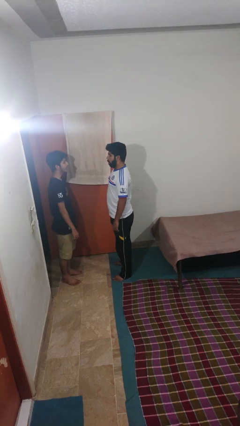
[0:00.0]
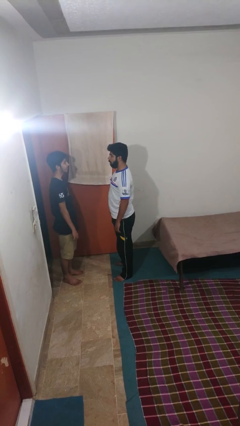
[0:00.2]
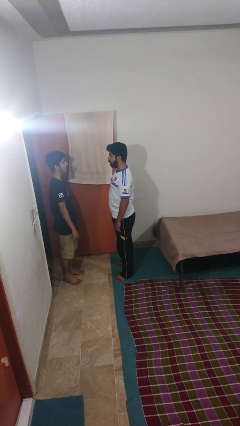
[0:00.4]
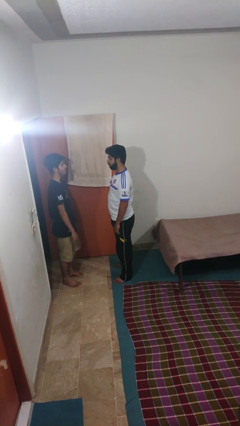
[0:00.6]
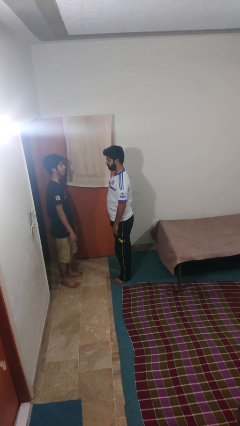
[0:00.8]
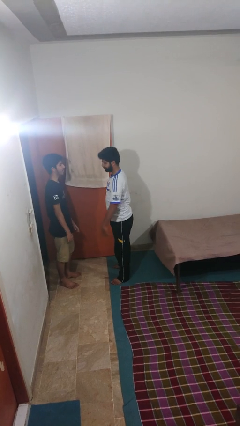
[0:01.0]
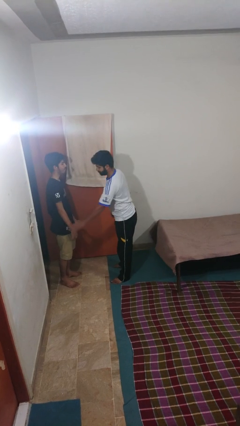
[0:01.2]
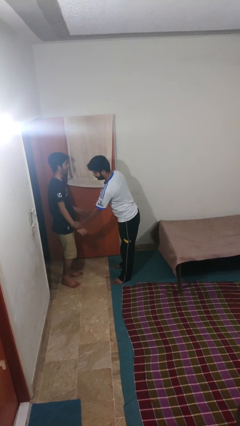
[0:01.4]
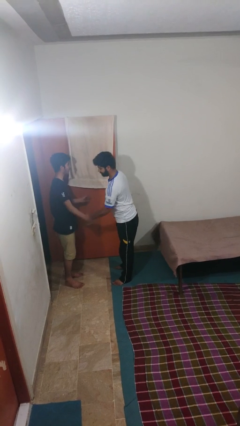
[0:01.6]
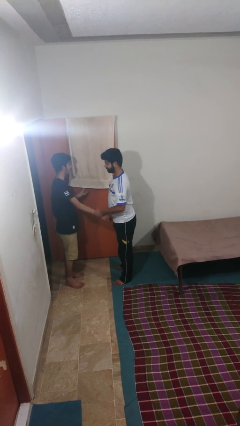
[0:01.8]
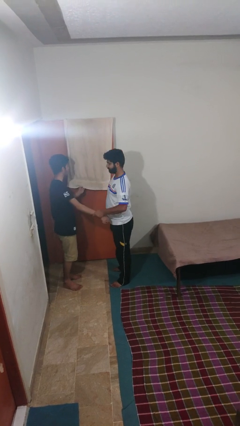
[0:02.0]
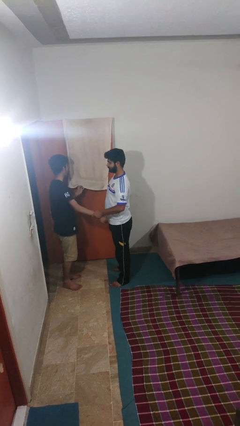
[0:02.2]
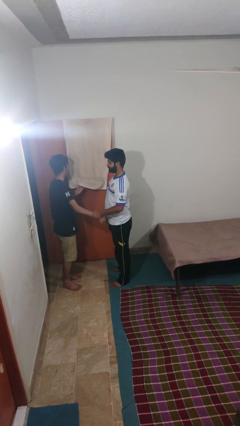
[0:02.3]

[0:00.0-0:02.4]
person grabs person by forearm

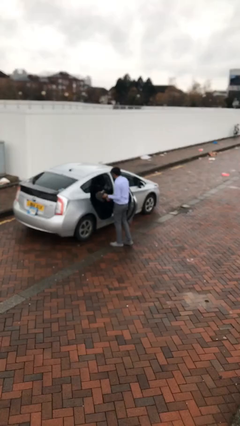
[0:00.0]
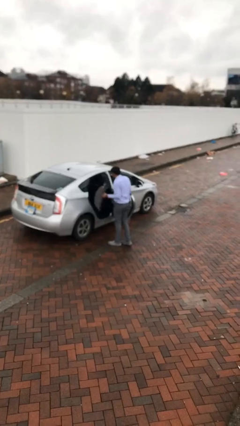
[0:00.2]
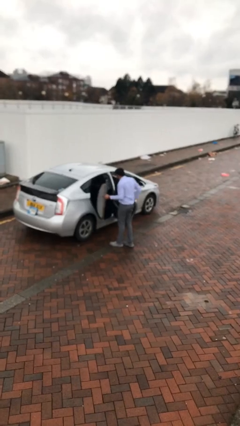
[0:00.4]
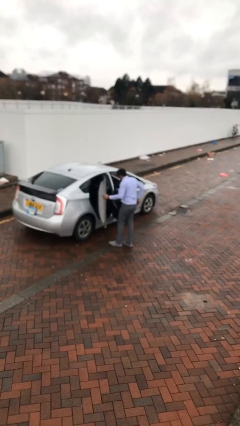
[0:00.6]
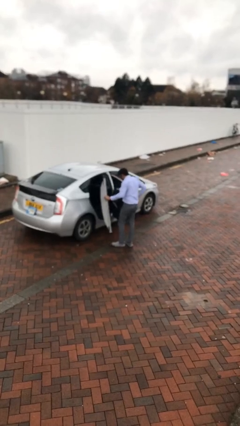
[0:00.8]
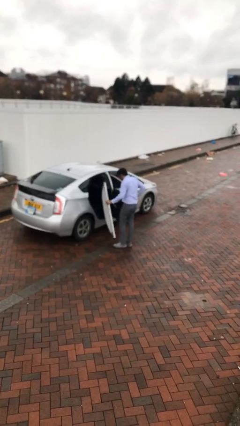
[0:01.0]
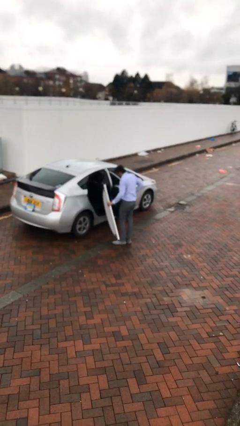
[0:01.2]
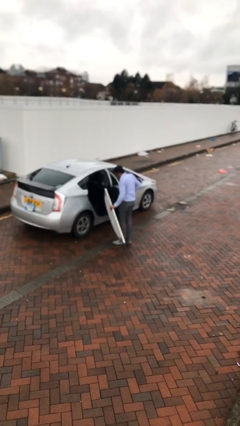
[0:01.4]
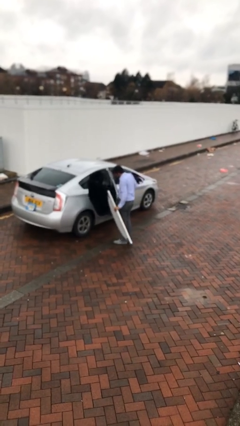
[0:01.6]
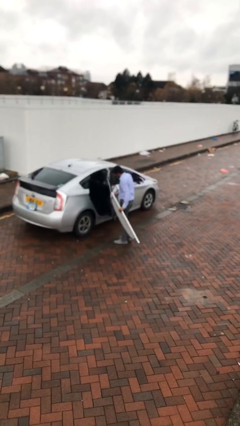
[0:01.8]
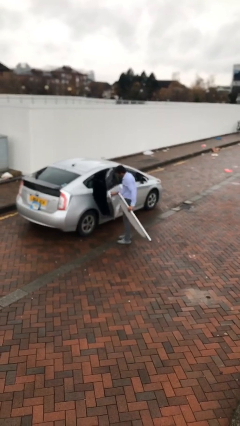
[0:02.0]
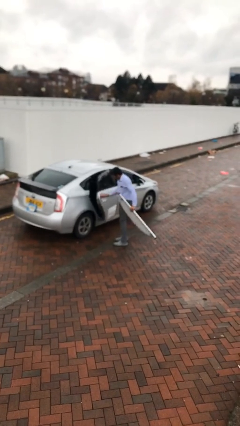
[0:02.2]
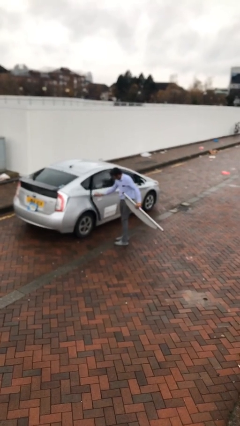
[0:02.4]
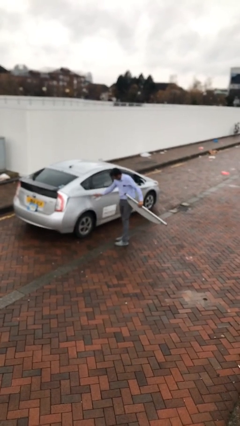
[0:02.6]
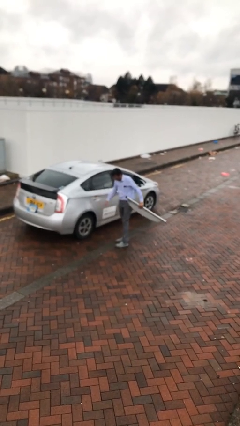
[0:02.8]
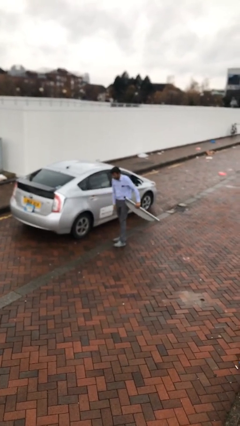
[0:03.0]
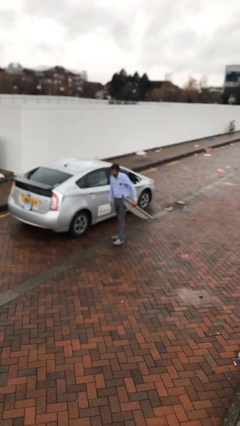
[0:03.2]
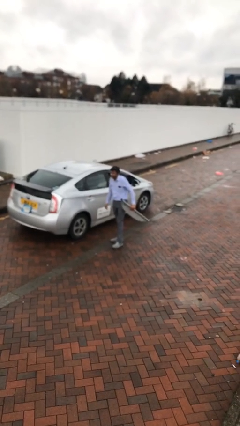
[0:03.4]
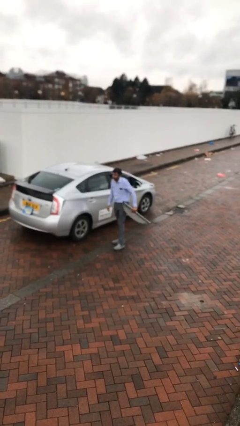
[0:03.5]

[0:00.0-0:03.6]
person closes car door

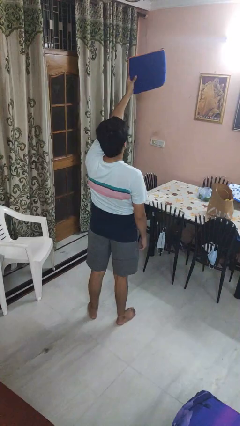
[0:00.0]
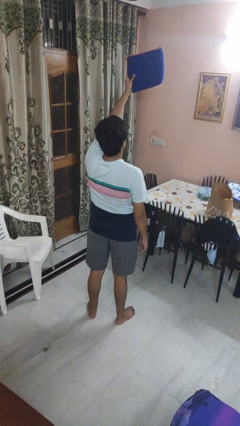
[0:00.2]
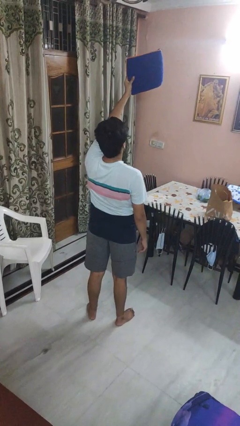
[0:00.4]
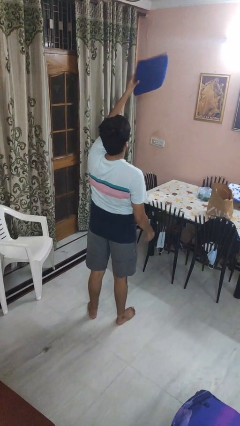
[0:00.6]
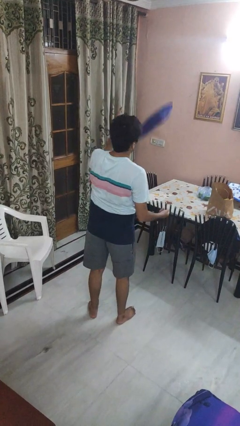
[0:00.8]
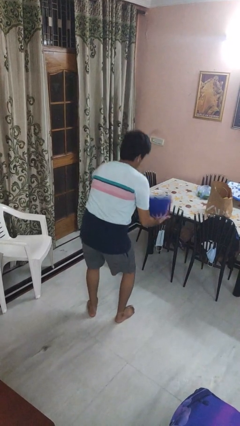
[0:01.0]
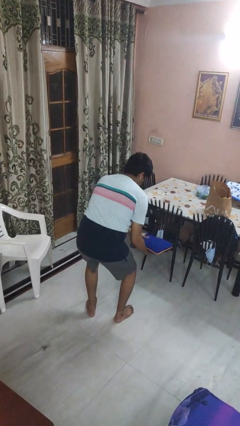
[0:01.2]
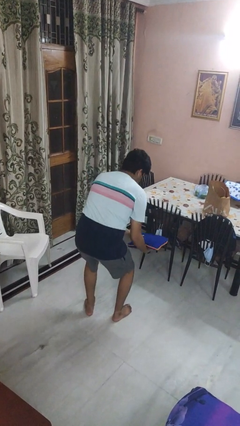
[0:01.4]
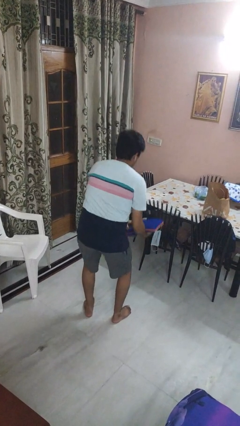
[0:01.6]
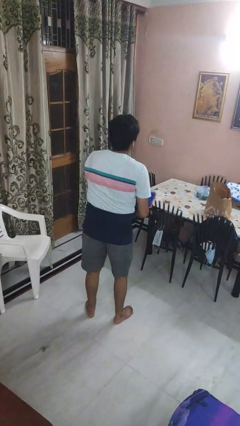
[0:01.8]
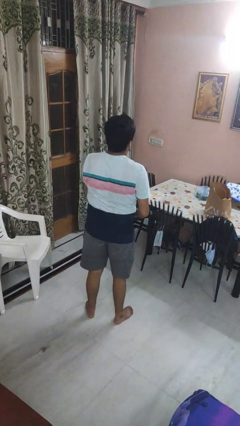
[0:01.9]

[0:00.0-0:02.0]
person catches dropped object

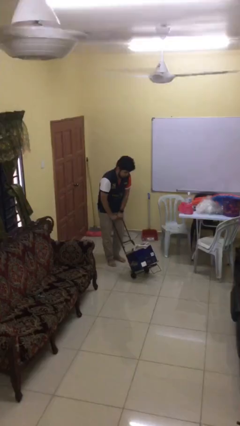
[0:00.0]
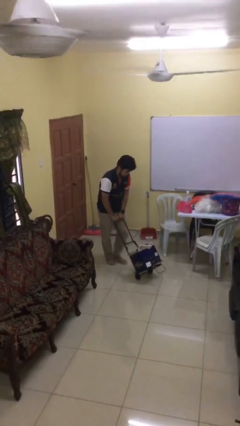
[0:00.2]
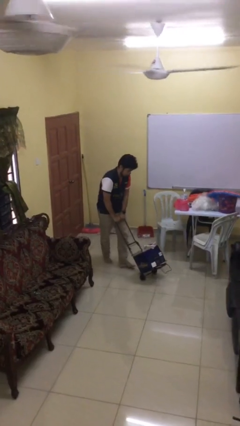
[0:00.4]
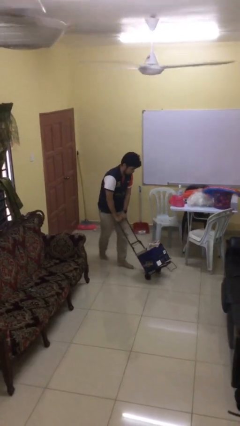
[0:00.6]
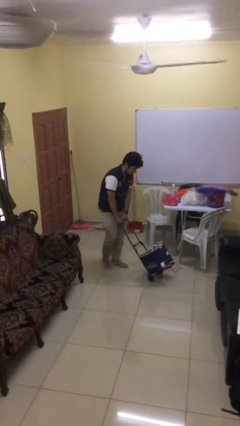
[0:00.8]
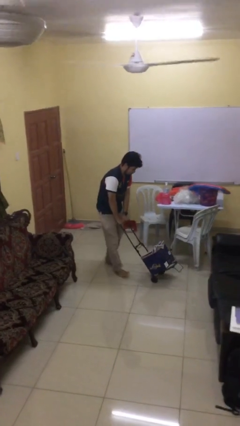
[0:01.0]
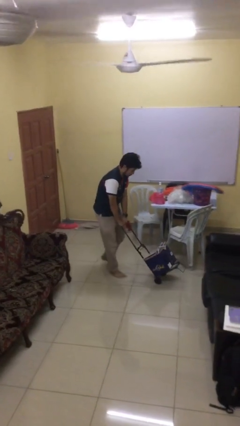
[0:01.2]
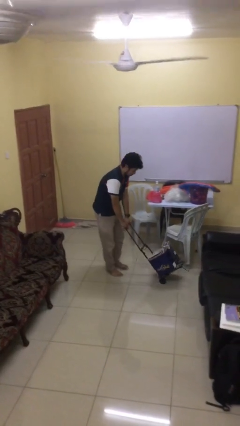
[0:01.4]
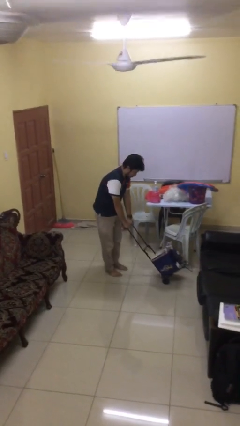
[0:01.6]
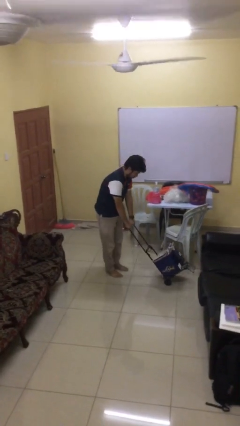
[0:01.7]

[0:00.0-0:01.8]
person pushes wheeled cart

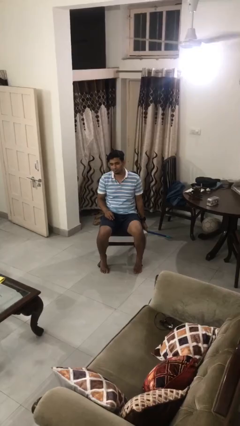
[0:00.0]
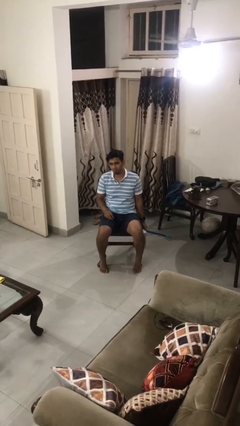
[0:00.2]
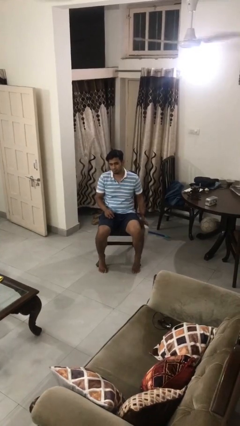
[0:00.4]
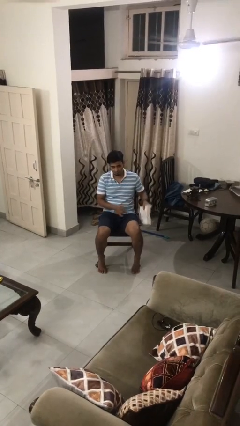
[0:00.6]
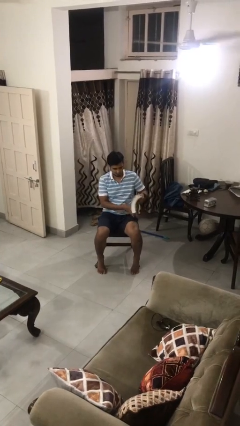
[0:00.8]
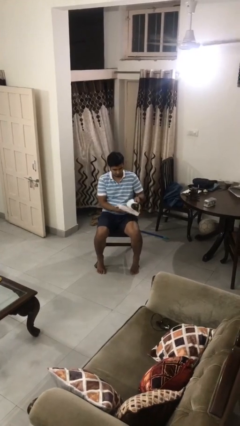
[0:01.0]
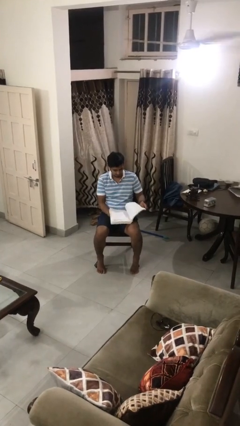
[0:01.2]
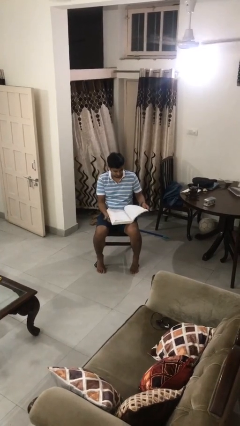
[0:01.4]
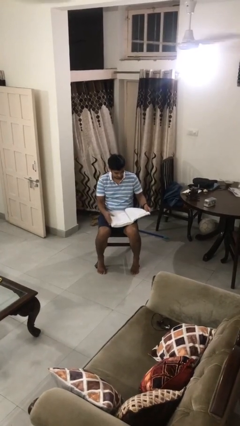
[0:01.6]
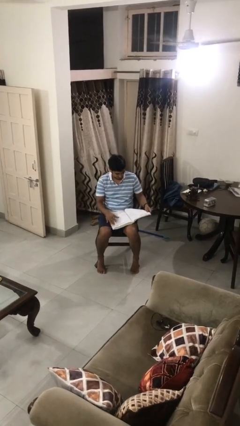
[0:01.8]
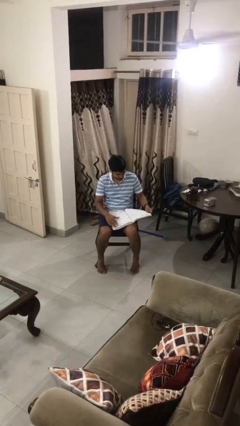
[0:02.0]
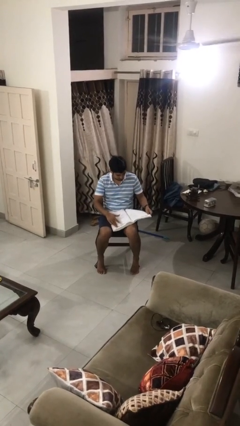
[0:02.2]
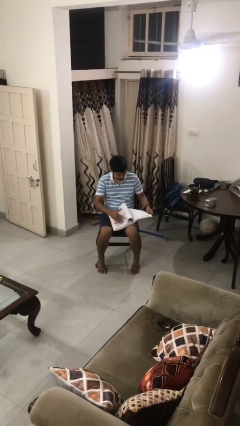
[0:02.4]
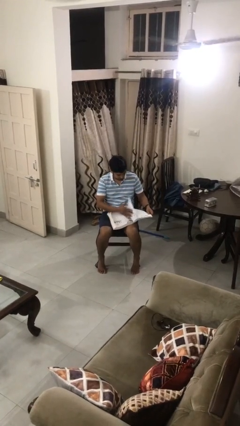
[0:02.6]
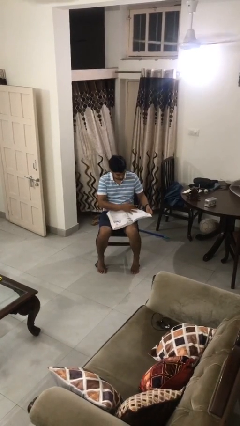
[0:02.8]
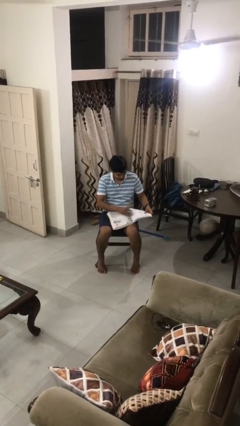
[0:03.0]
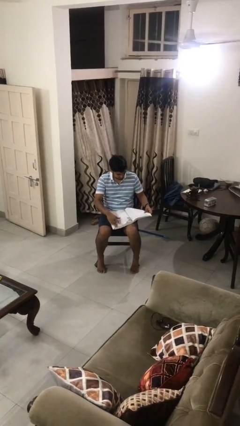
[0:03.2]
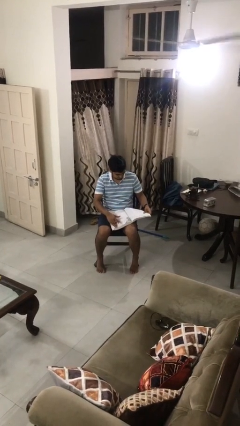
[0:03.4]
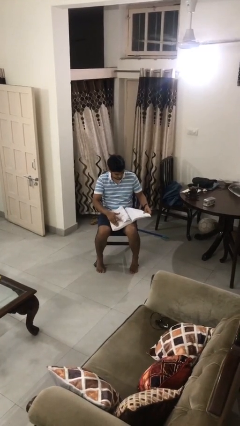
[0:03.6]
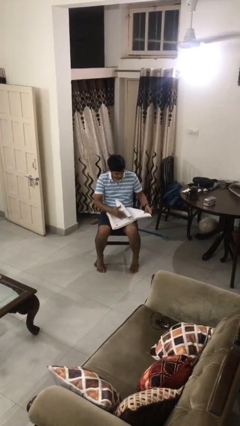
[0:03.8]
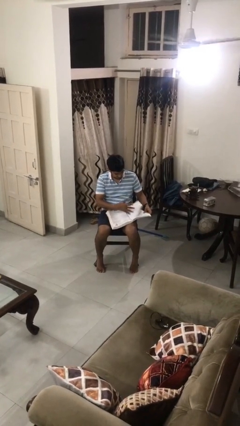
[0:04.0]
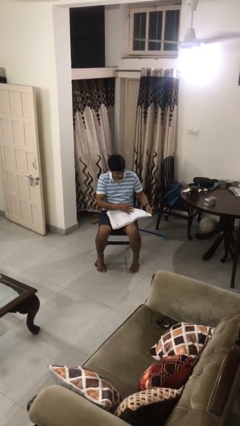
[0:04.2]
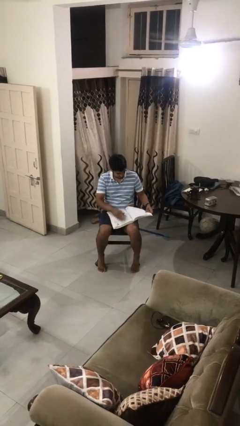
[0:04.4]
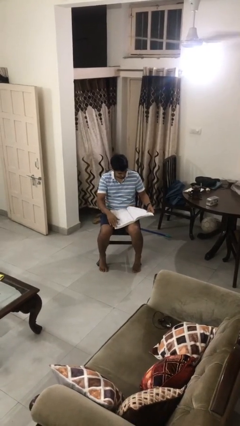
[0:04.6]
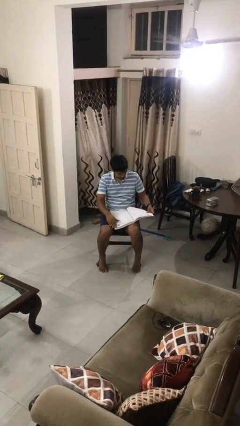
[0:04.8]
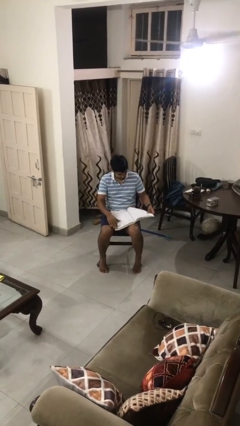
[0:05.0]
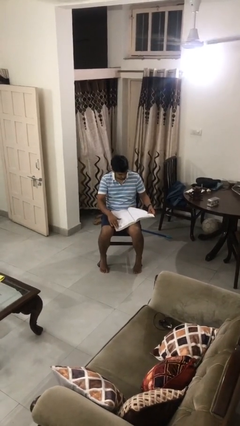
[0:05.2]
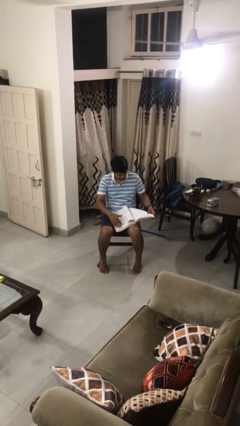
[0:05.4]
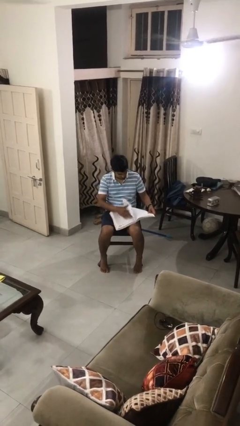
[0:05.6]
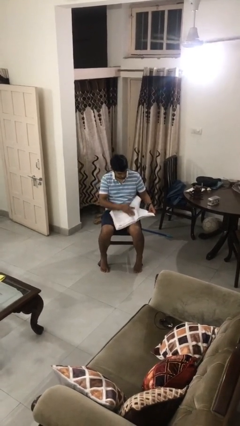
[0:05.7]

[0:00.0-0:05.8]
person reads book

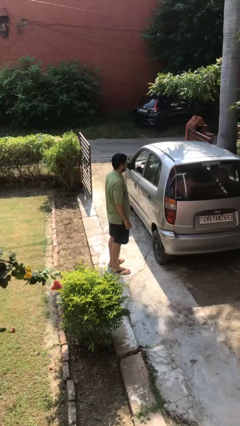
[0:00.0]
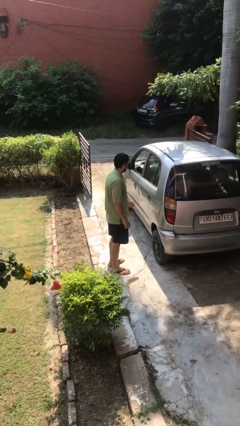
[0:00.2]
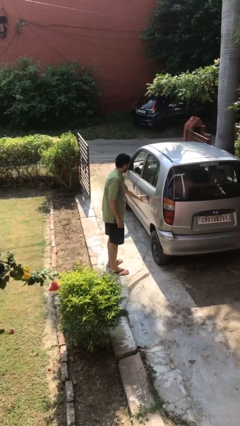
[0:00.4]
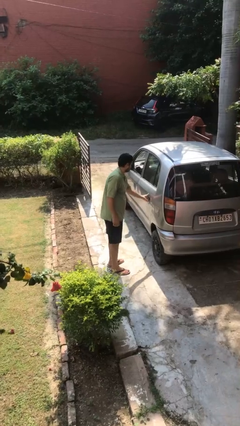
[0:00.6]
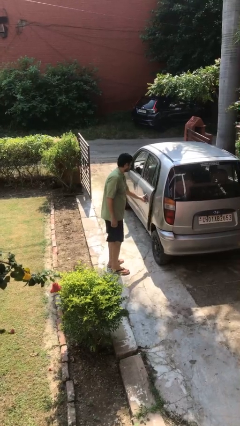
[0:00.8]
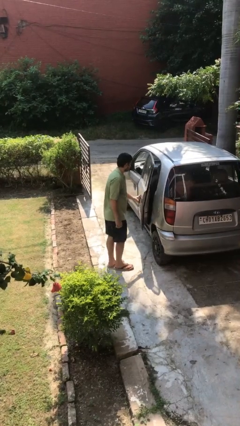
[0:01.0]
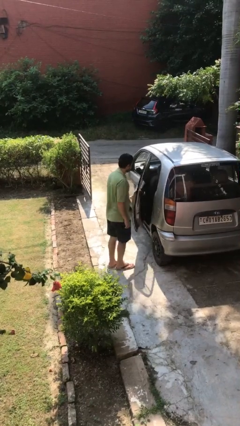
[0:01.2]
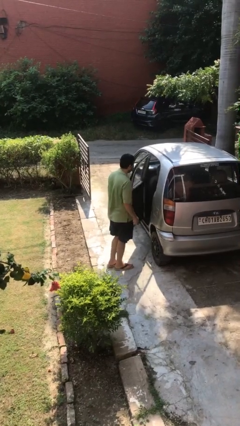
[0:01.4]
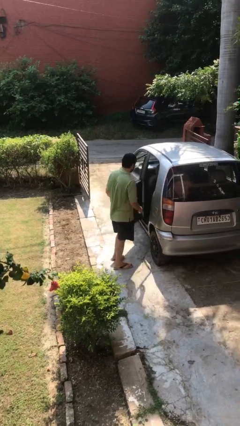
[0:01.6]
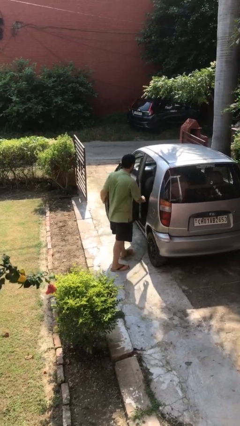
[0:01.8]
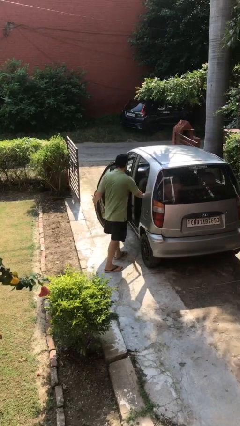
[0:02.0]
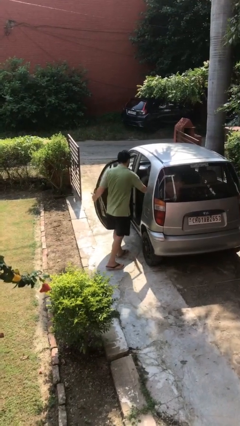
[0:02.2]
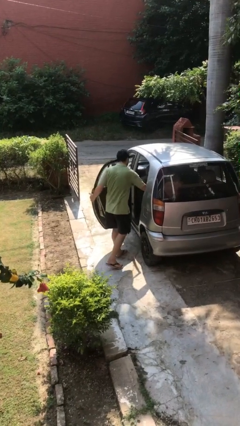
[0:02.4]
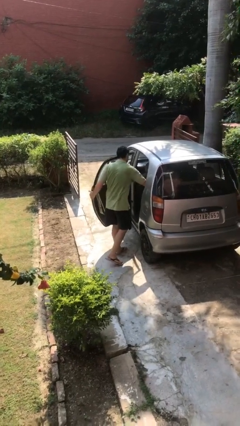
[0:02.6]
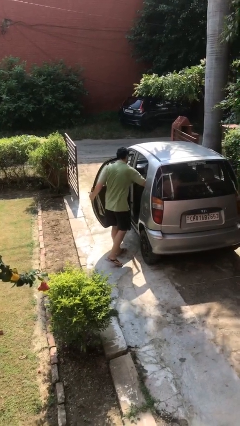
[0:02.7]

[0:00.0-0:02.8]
person opens car door
